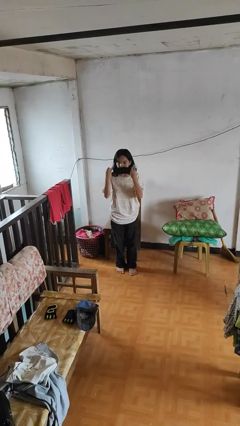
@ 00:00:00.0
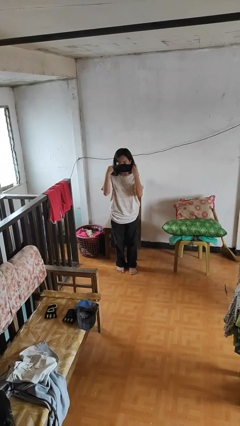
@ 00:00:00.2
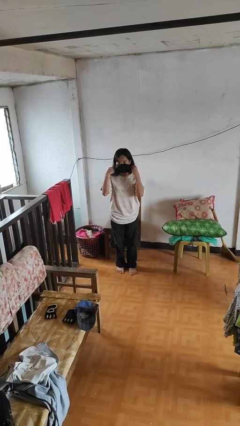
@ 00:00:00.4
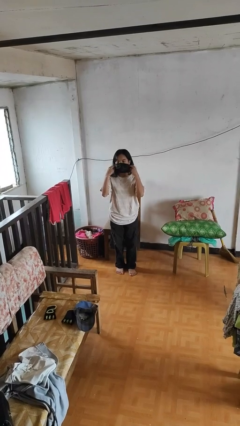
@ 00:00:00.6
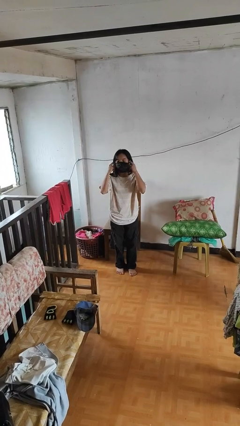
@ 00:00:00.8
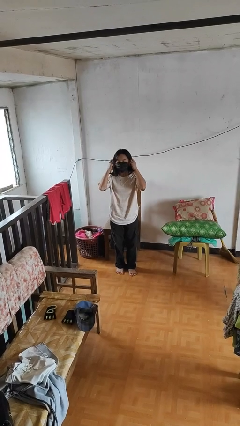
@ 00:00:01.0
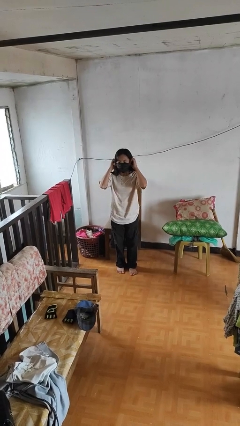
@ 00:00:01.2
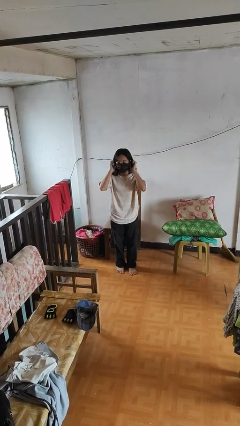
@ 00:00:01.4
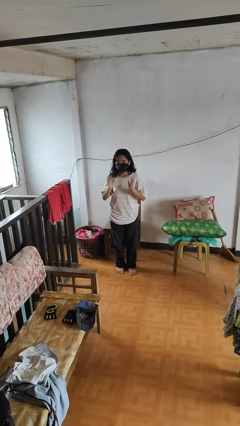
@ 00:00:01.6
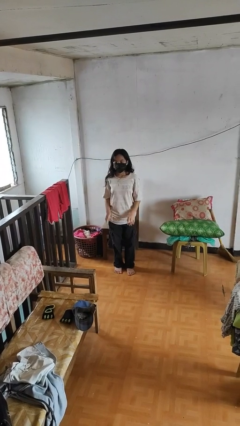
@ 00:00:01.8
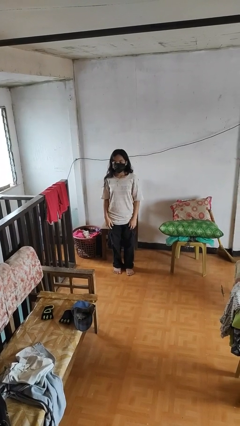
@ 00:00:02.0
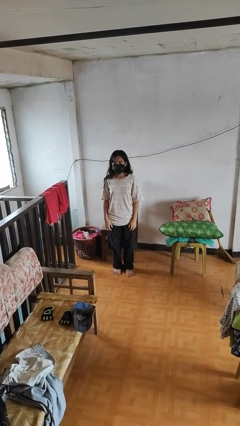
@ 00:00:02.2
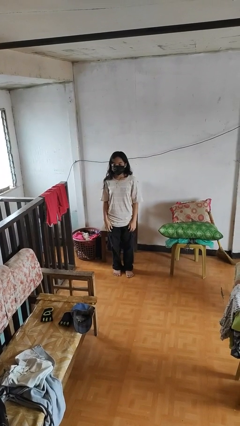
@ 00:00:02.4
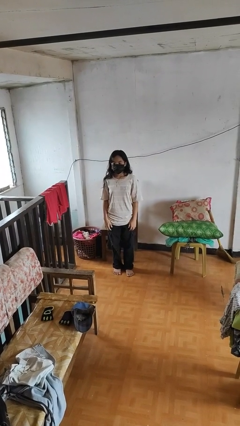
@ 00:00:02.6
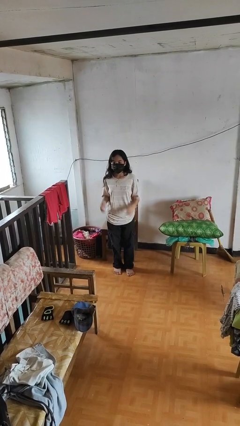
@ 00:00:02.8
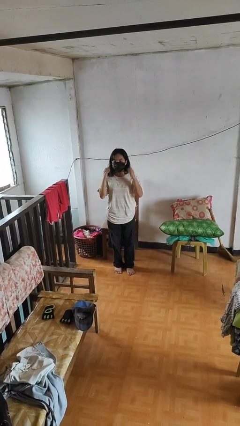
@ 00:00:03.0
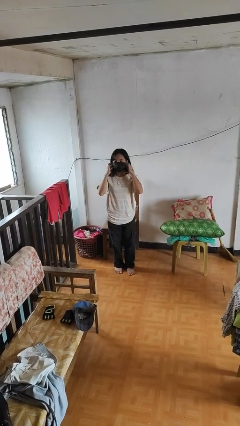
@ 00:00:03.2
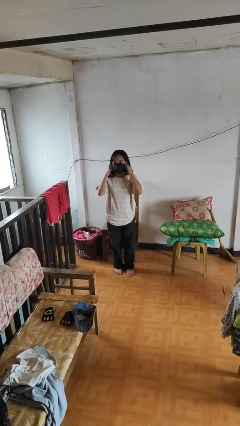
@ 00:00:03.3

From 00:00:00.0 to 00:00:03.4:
person puts on facemask

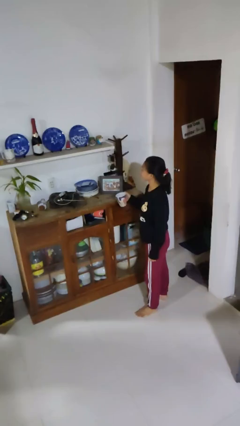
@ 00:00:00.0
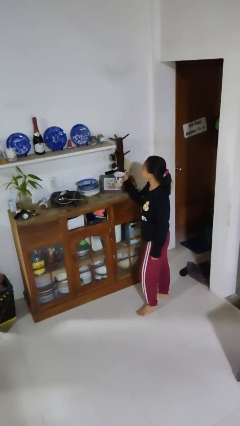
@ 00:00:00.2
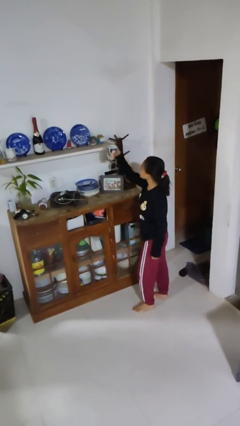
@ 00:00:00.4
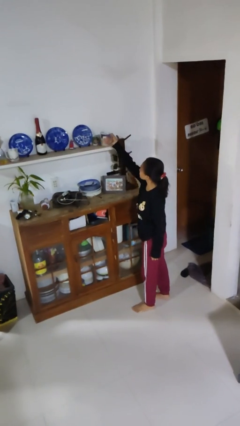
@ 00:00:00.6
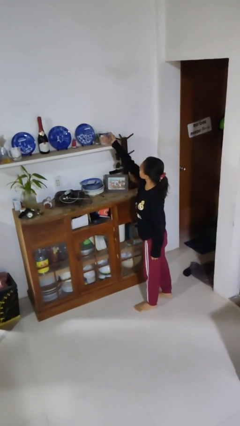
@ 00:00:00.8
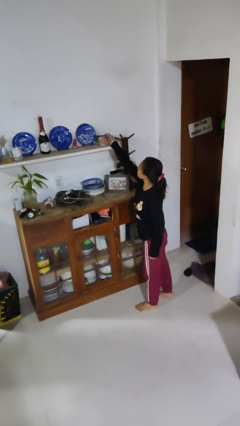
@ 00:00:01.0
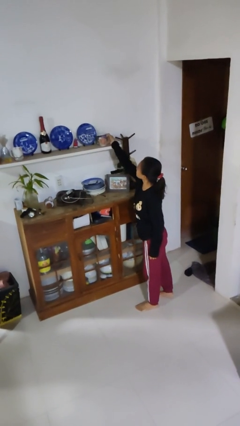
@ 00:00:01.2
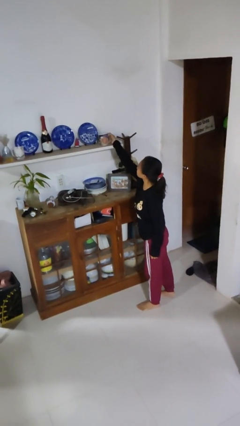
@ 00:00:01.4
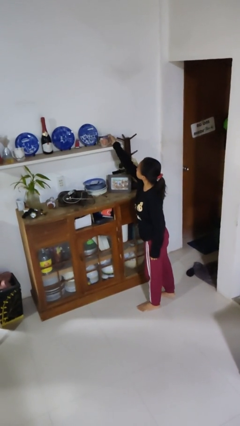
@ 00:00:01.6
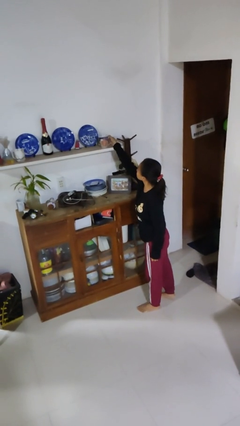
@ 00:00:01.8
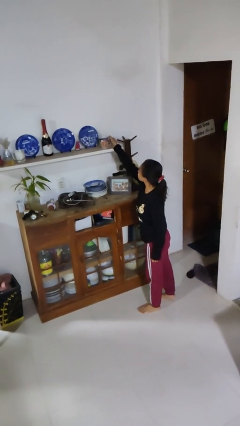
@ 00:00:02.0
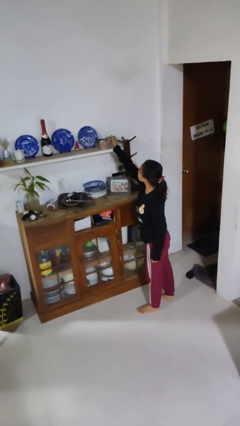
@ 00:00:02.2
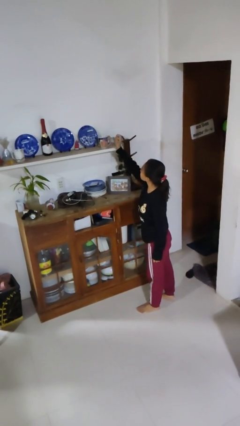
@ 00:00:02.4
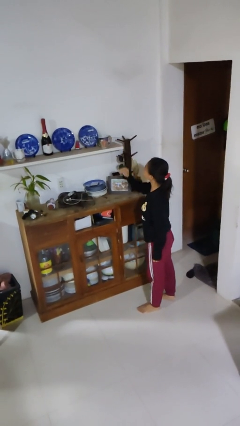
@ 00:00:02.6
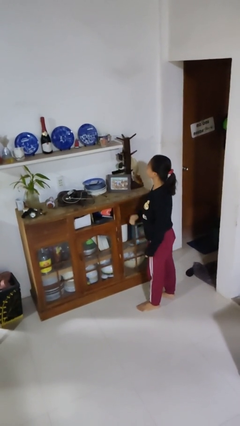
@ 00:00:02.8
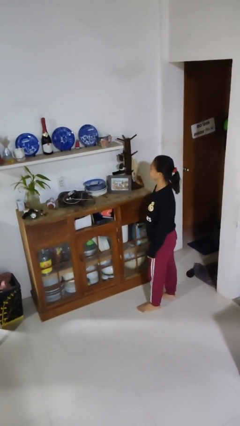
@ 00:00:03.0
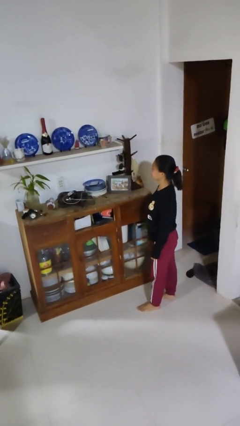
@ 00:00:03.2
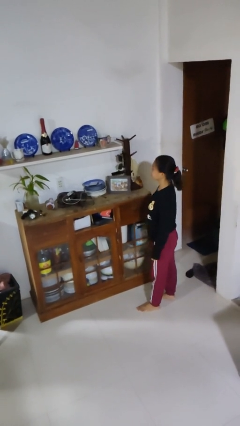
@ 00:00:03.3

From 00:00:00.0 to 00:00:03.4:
person puts down object on shelf

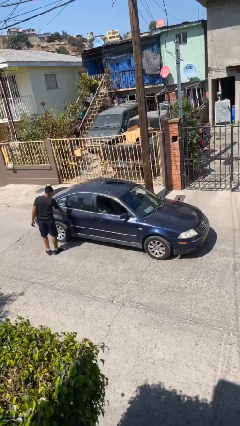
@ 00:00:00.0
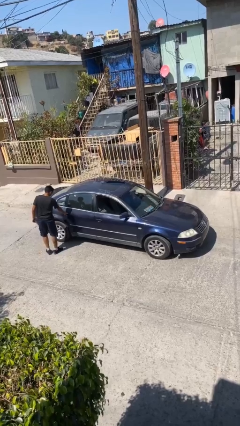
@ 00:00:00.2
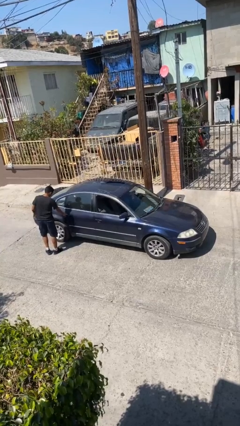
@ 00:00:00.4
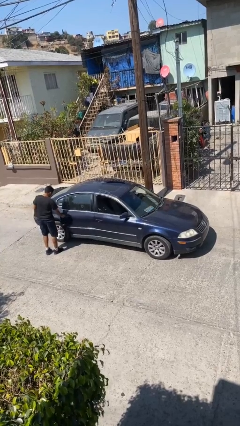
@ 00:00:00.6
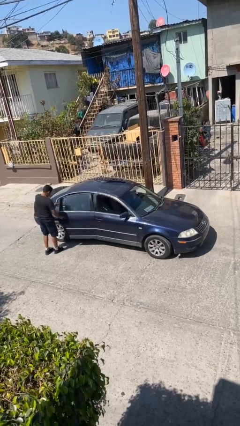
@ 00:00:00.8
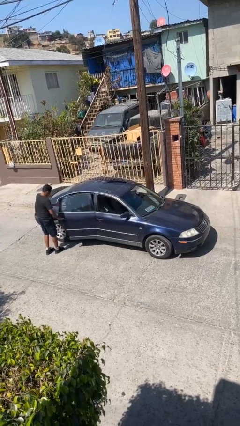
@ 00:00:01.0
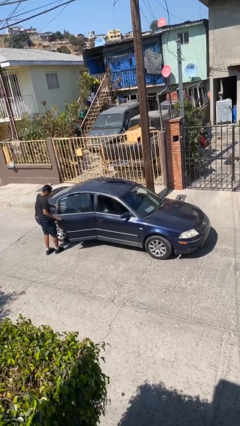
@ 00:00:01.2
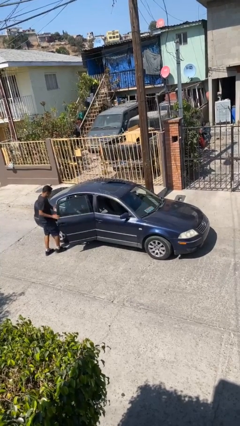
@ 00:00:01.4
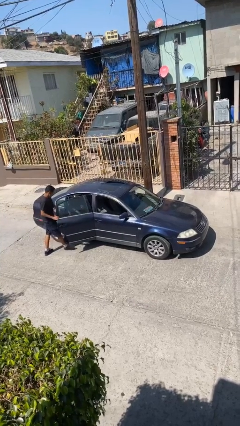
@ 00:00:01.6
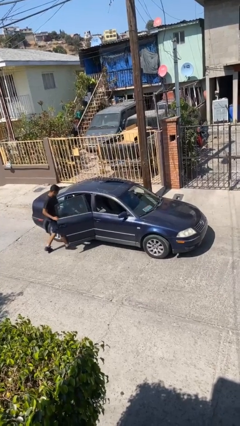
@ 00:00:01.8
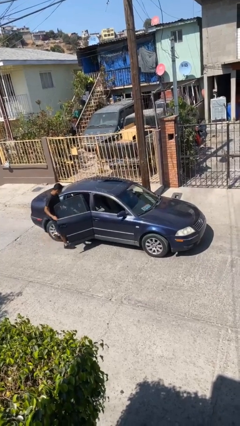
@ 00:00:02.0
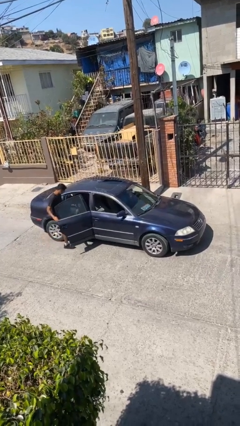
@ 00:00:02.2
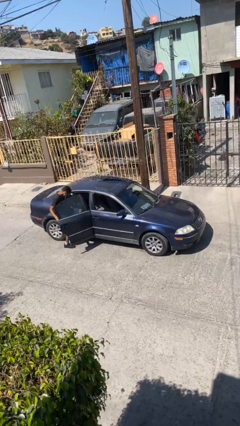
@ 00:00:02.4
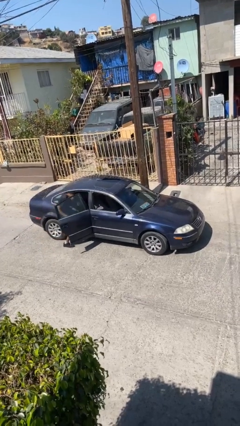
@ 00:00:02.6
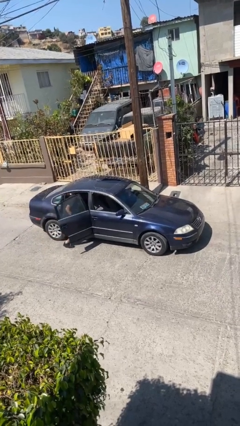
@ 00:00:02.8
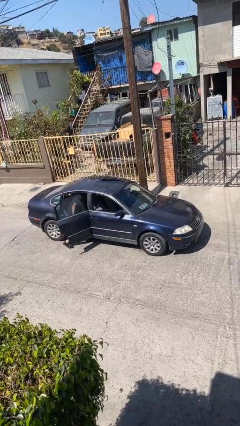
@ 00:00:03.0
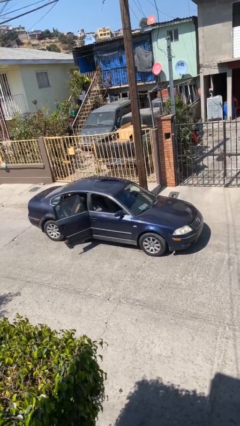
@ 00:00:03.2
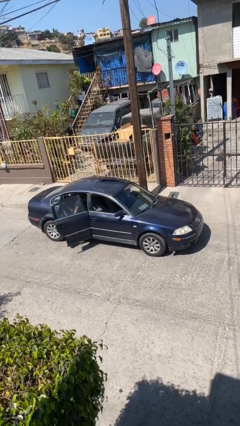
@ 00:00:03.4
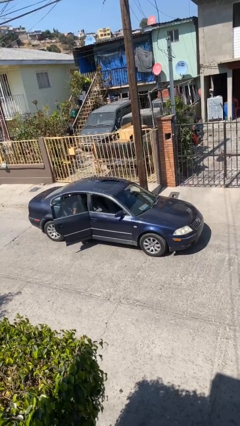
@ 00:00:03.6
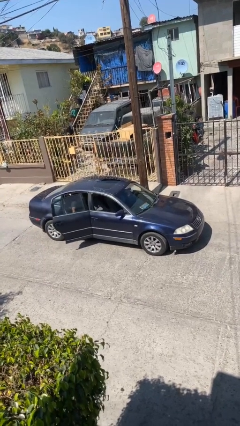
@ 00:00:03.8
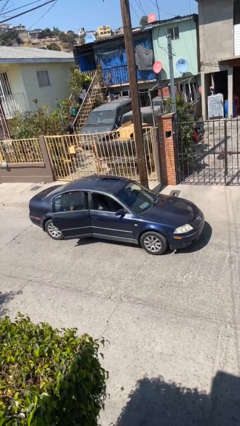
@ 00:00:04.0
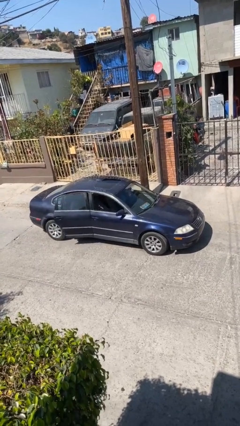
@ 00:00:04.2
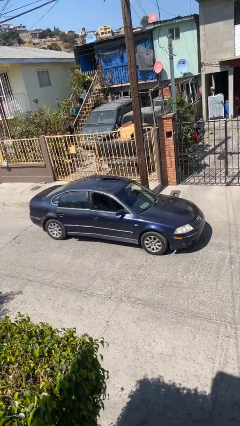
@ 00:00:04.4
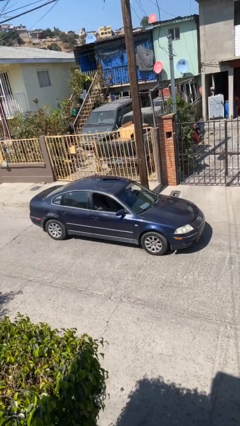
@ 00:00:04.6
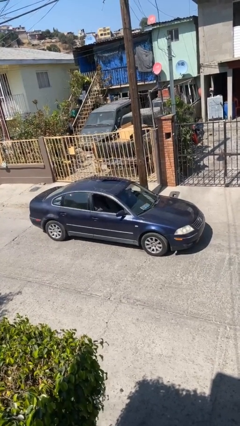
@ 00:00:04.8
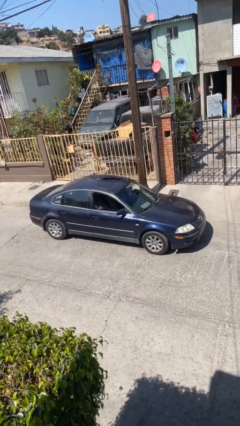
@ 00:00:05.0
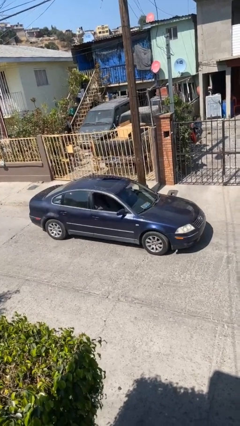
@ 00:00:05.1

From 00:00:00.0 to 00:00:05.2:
car picks up person

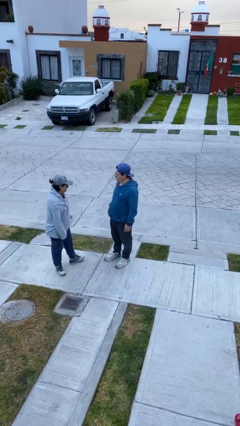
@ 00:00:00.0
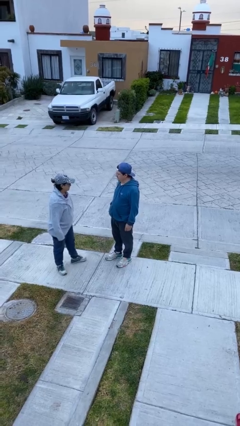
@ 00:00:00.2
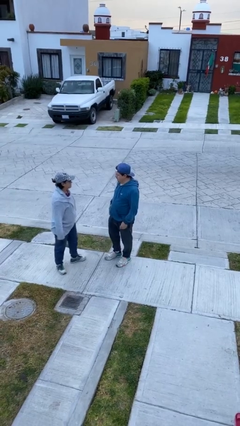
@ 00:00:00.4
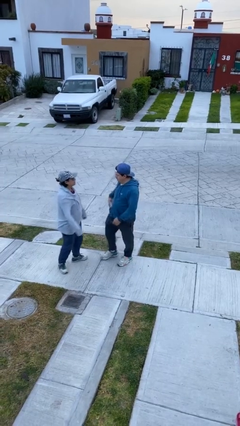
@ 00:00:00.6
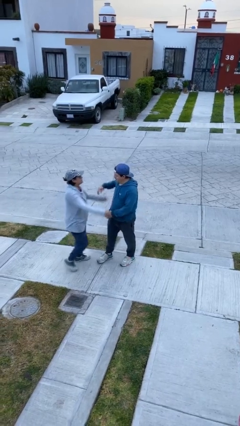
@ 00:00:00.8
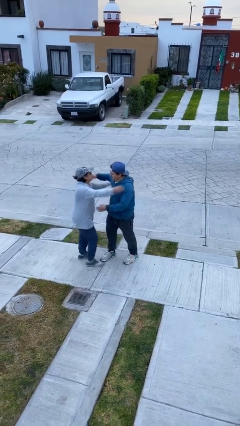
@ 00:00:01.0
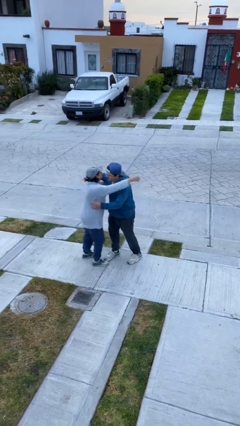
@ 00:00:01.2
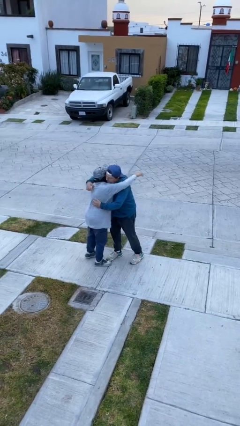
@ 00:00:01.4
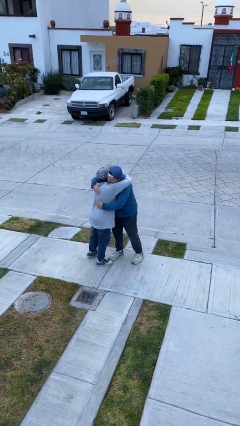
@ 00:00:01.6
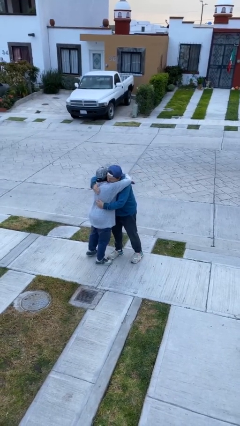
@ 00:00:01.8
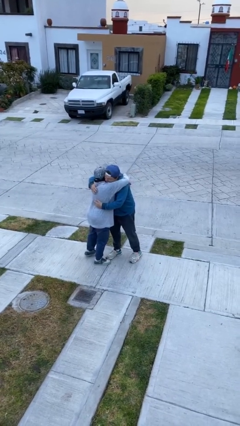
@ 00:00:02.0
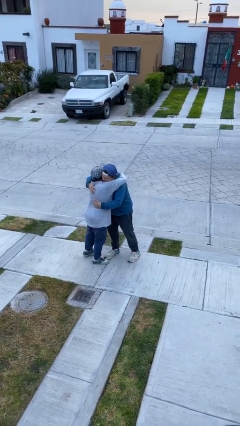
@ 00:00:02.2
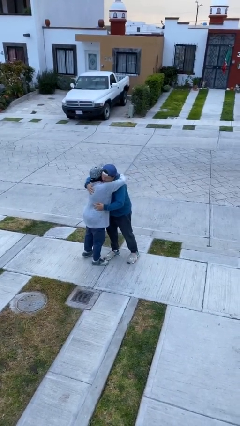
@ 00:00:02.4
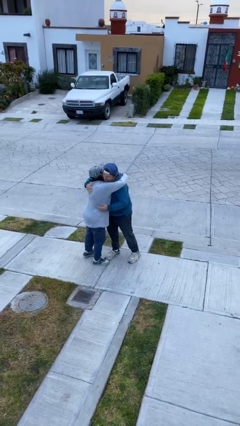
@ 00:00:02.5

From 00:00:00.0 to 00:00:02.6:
person embraces person

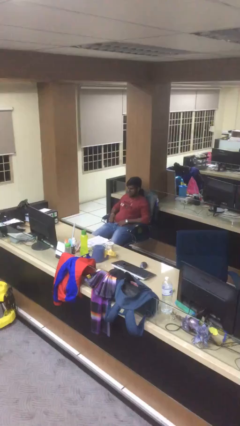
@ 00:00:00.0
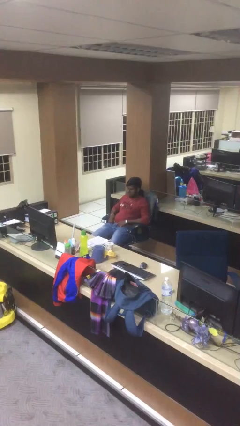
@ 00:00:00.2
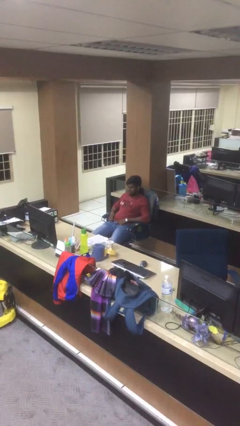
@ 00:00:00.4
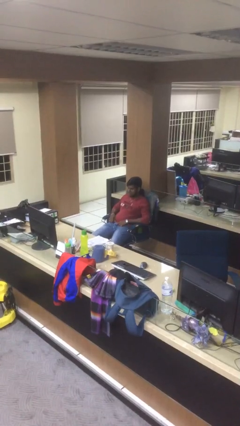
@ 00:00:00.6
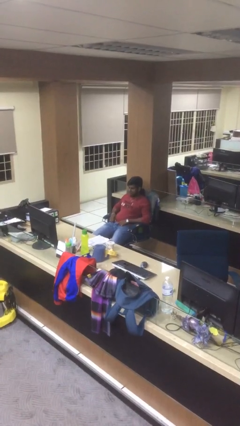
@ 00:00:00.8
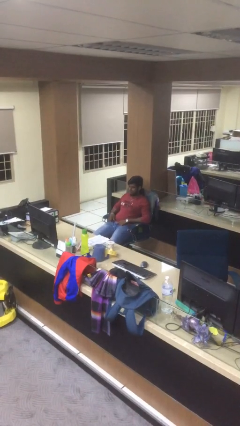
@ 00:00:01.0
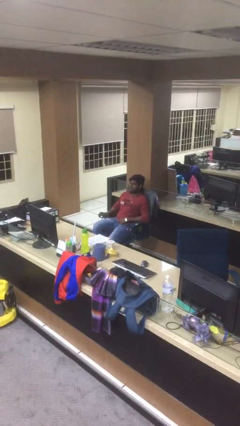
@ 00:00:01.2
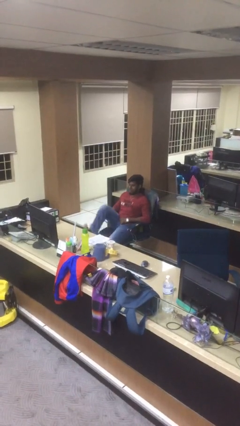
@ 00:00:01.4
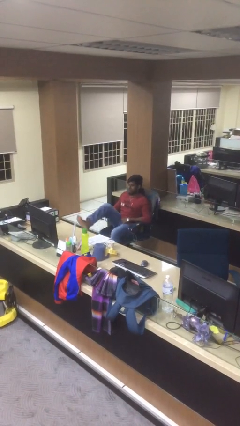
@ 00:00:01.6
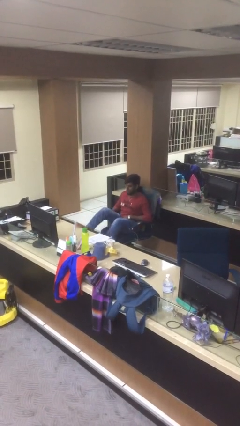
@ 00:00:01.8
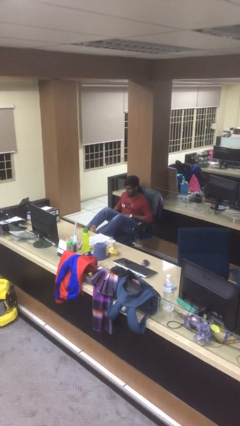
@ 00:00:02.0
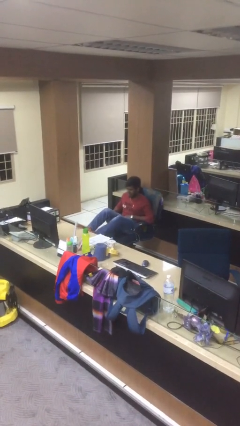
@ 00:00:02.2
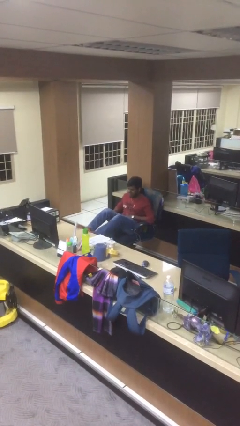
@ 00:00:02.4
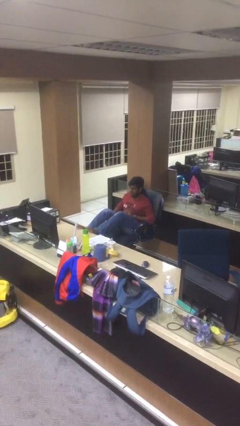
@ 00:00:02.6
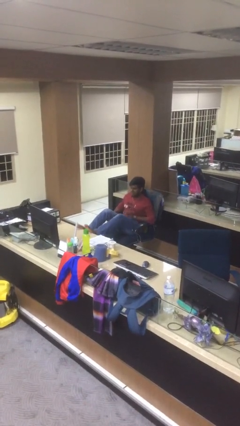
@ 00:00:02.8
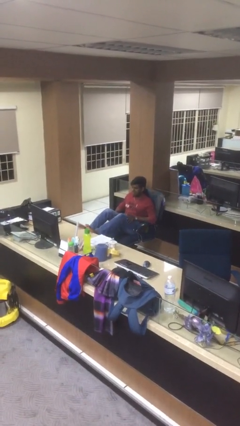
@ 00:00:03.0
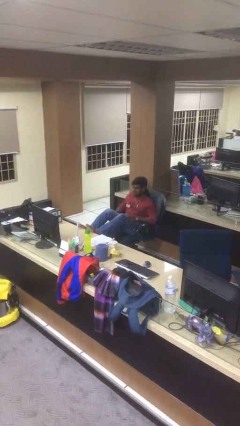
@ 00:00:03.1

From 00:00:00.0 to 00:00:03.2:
person puts feet up
